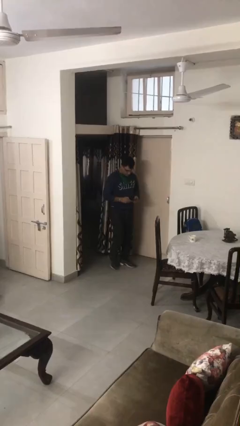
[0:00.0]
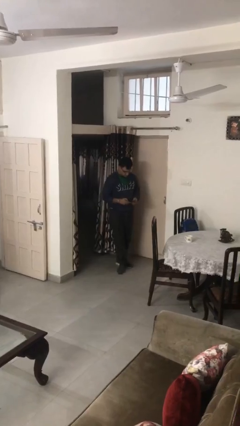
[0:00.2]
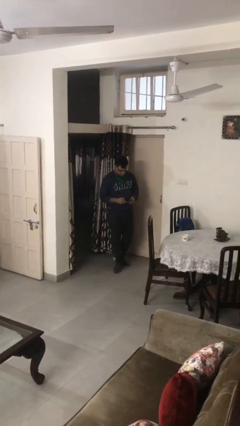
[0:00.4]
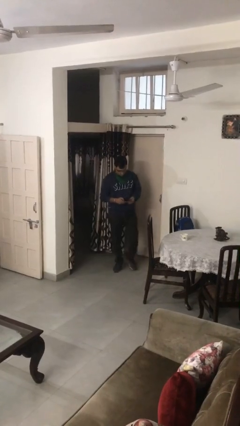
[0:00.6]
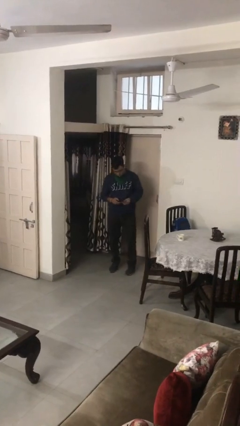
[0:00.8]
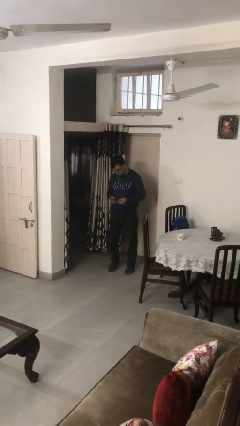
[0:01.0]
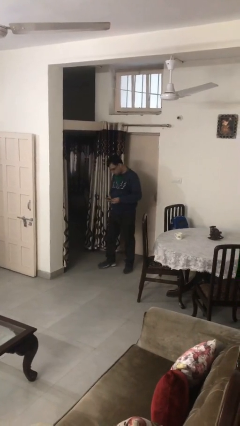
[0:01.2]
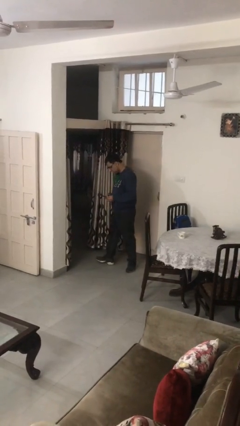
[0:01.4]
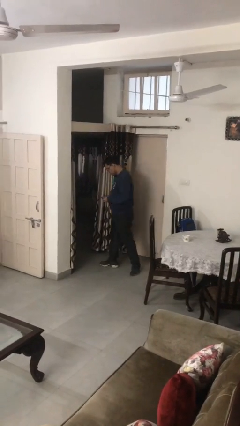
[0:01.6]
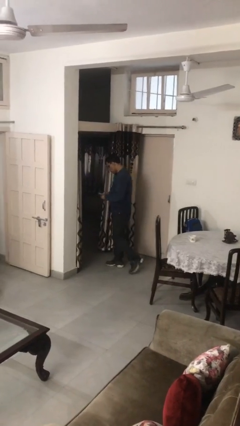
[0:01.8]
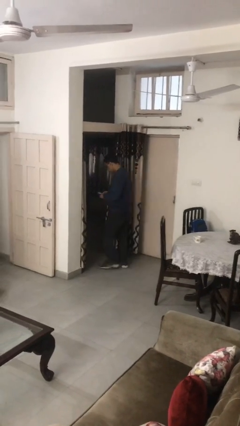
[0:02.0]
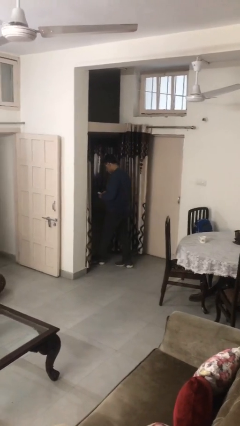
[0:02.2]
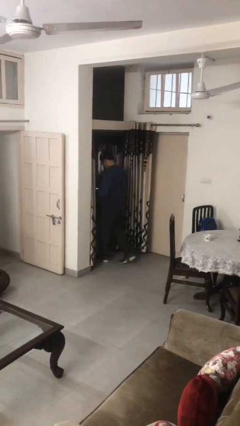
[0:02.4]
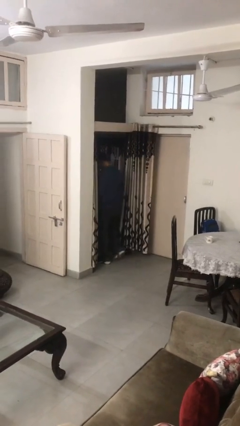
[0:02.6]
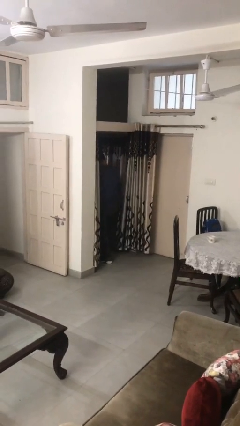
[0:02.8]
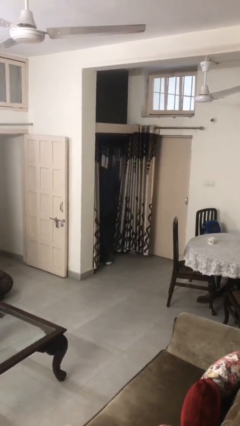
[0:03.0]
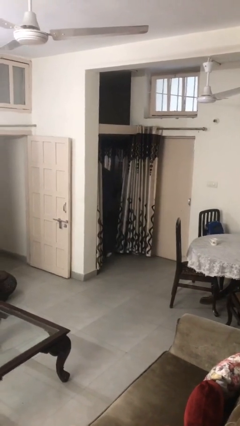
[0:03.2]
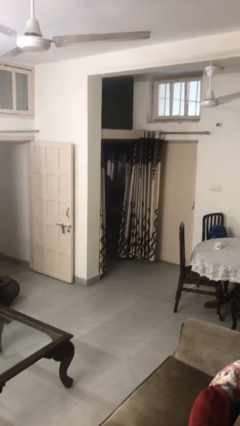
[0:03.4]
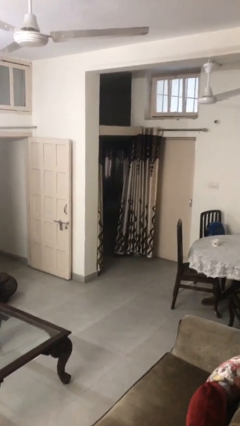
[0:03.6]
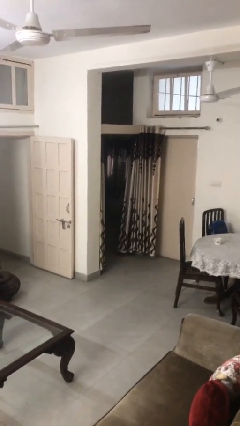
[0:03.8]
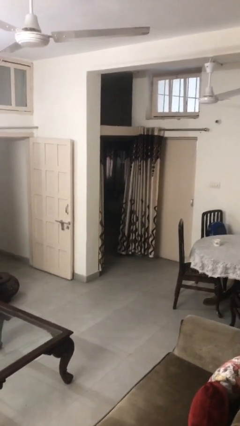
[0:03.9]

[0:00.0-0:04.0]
person exits scene through structure

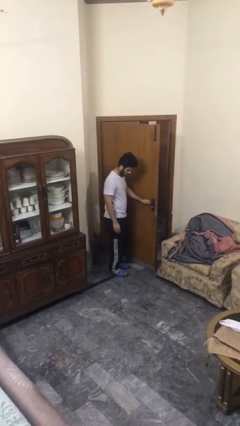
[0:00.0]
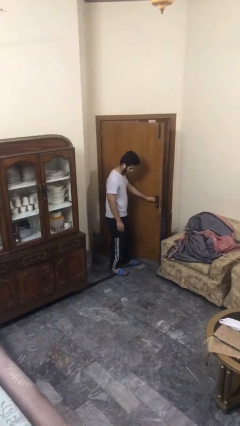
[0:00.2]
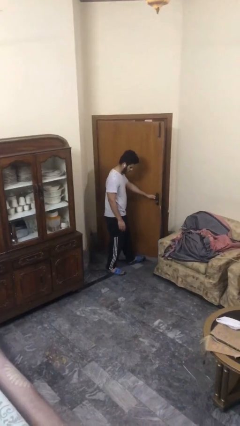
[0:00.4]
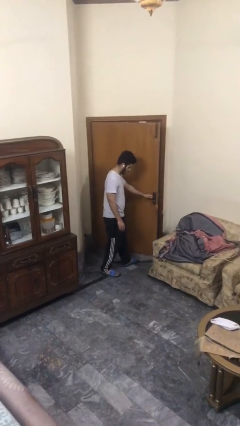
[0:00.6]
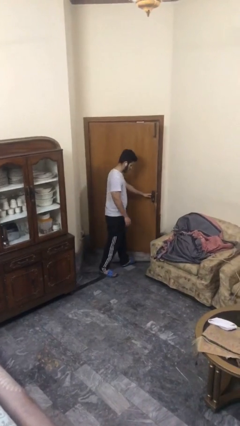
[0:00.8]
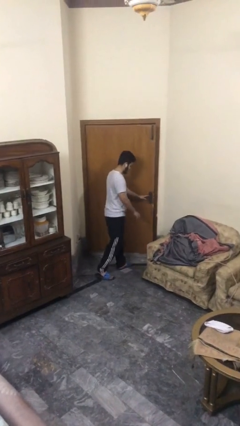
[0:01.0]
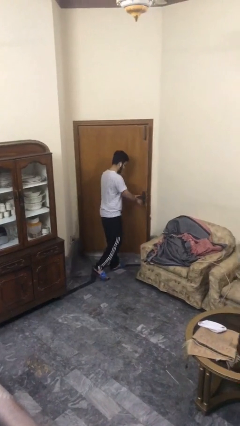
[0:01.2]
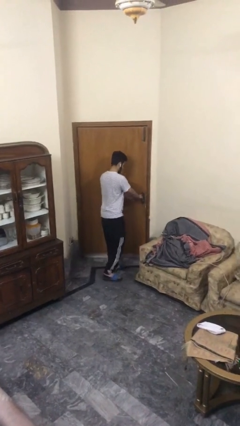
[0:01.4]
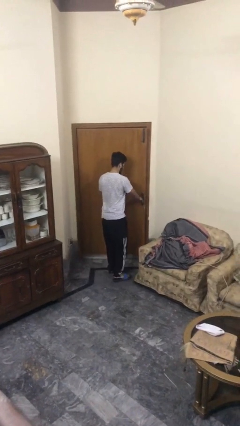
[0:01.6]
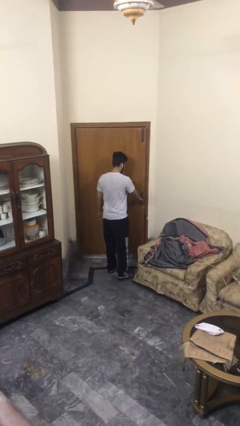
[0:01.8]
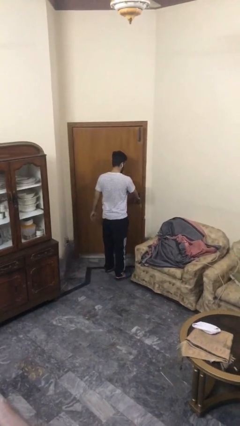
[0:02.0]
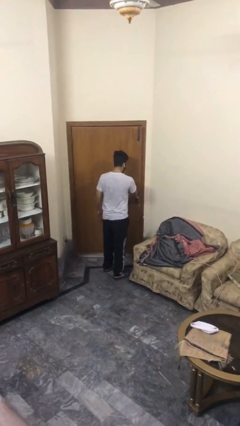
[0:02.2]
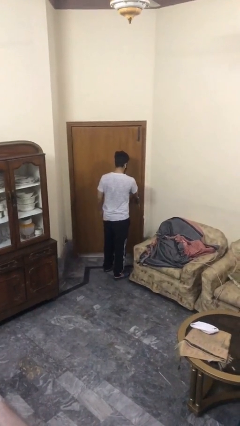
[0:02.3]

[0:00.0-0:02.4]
person closes facility door

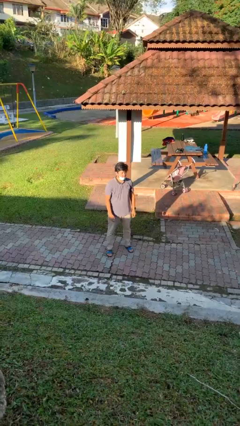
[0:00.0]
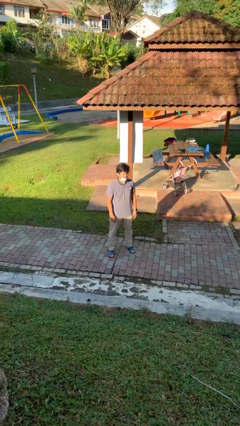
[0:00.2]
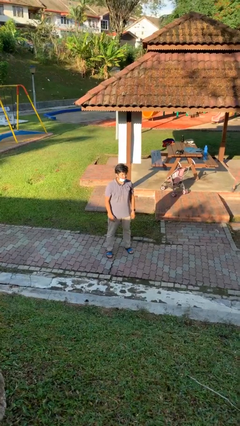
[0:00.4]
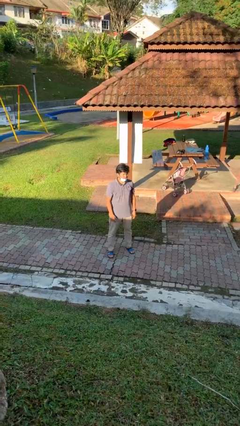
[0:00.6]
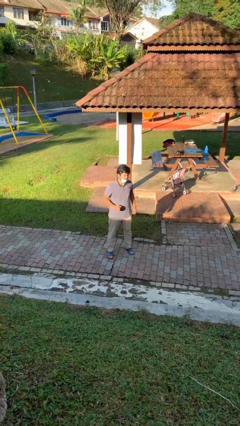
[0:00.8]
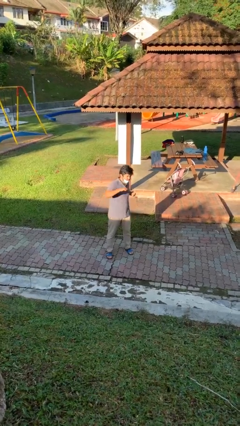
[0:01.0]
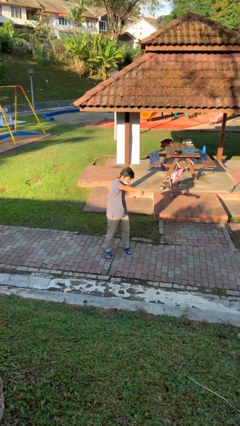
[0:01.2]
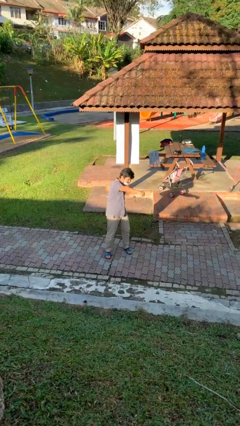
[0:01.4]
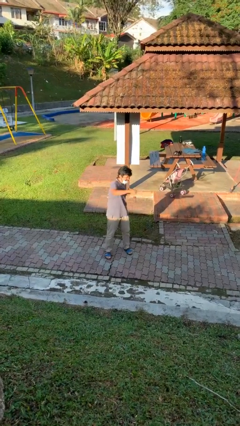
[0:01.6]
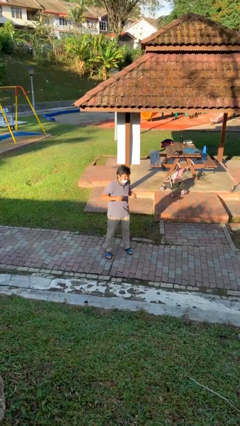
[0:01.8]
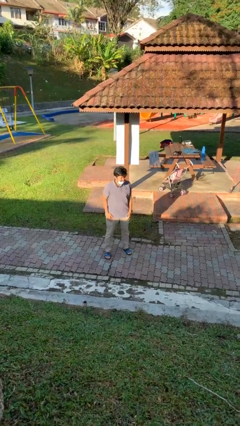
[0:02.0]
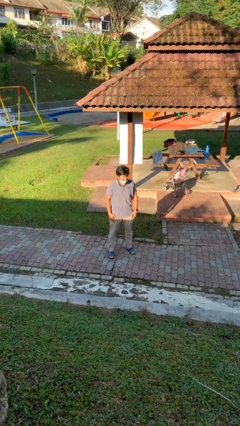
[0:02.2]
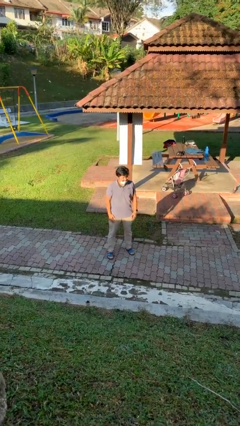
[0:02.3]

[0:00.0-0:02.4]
person punches

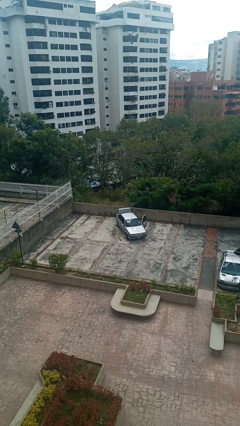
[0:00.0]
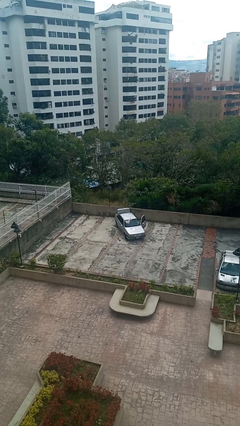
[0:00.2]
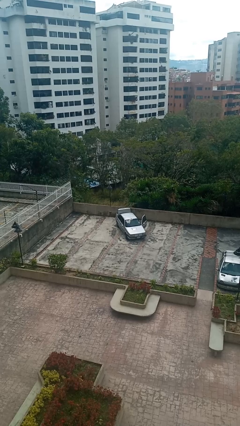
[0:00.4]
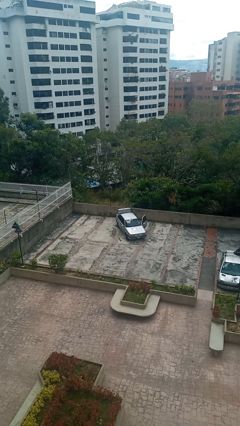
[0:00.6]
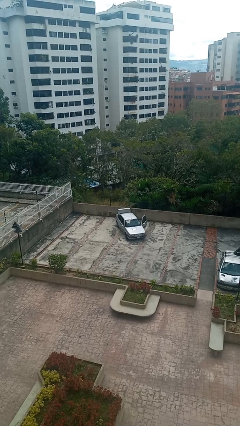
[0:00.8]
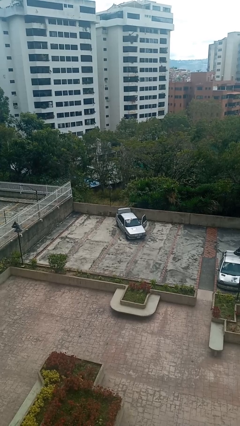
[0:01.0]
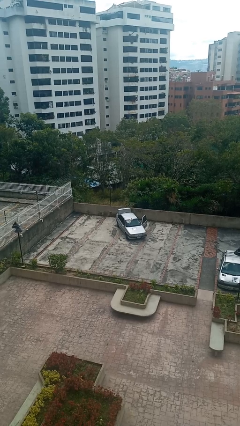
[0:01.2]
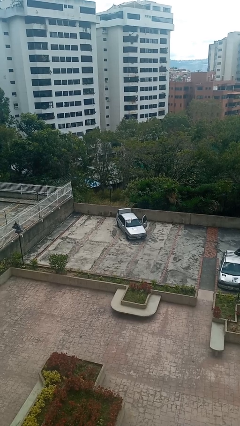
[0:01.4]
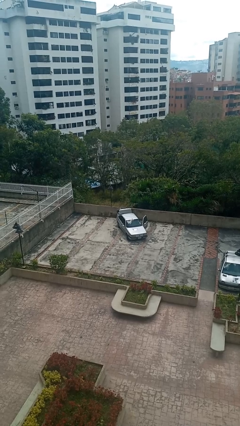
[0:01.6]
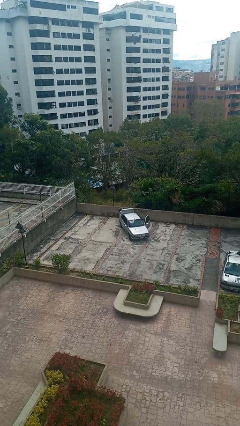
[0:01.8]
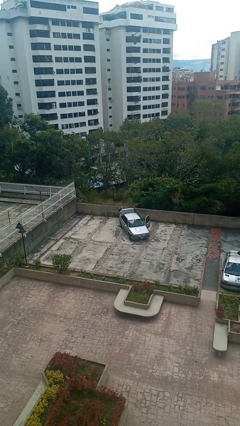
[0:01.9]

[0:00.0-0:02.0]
person unloads car

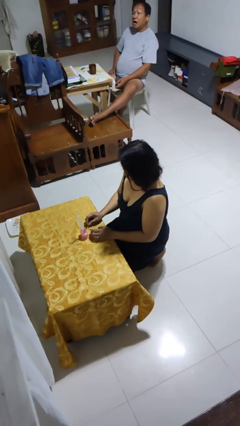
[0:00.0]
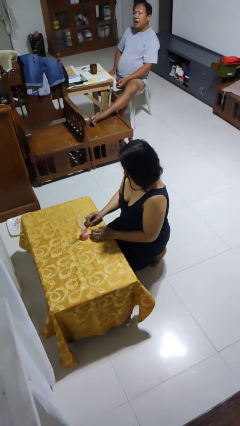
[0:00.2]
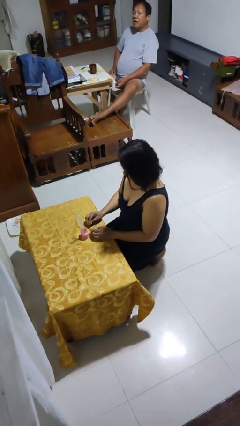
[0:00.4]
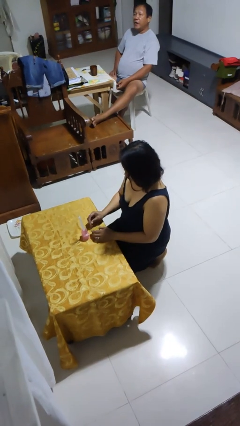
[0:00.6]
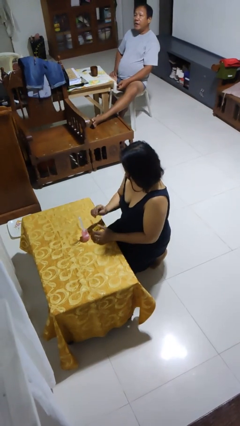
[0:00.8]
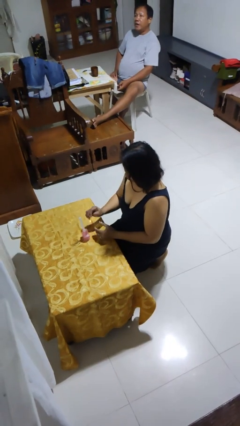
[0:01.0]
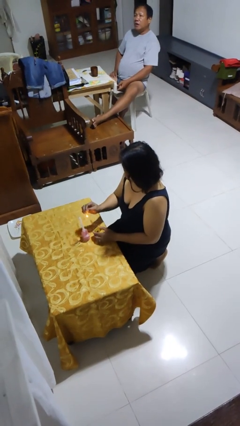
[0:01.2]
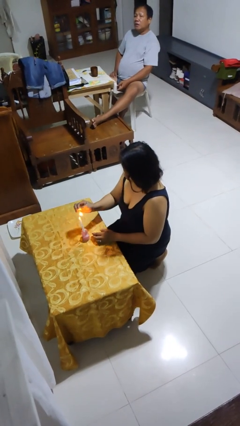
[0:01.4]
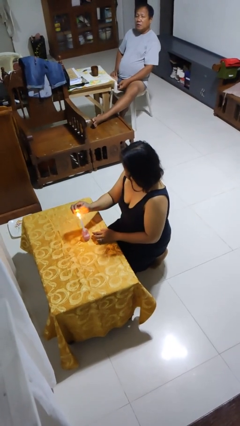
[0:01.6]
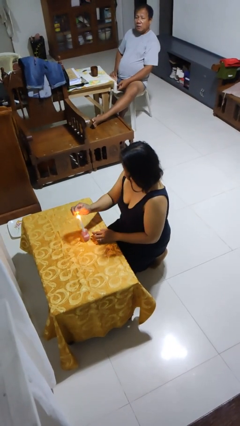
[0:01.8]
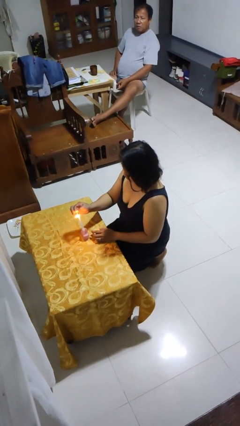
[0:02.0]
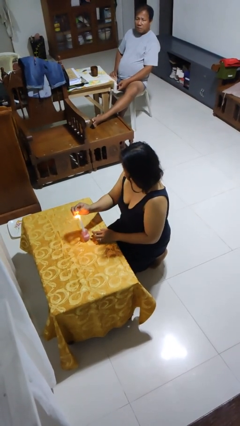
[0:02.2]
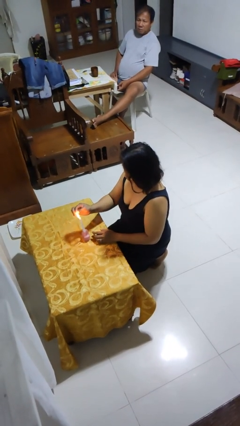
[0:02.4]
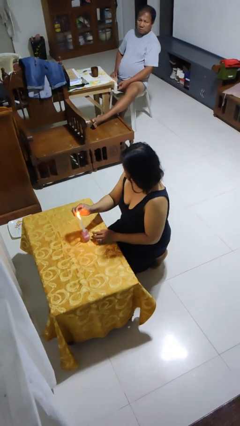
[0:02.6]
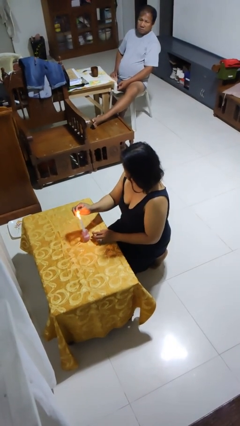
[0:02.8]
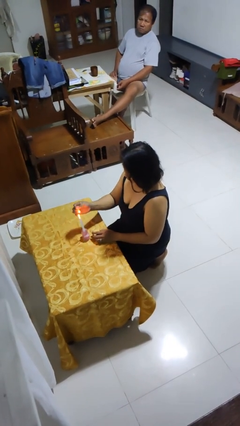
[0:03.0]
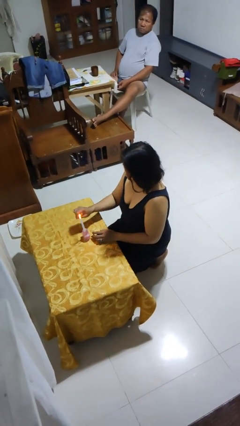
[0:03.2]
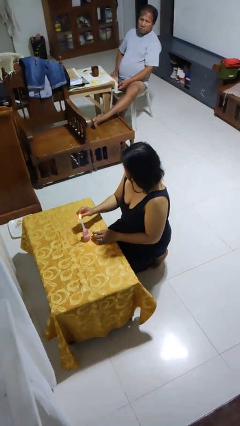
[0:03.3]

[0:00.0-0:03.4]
person lights candle

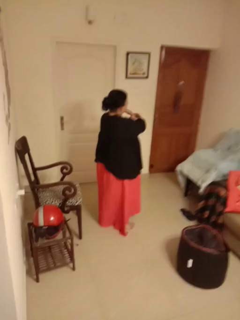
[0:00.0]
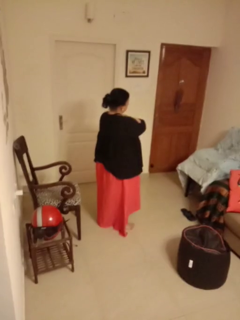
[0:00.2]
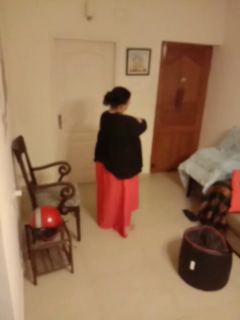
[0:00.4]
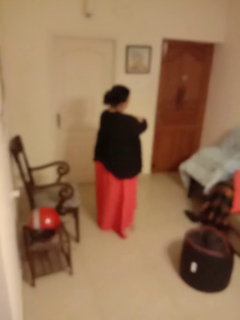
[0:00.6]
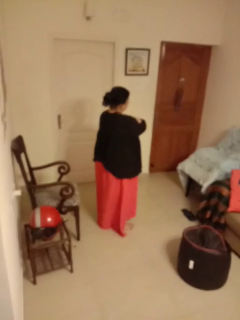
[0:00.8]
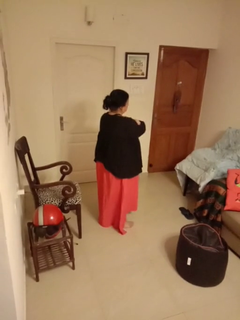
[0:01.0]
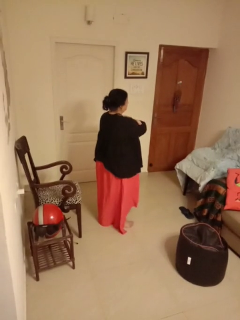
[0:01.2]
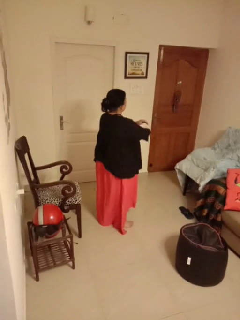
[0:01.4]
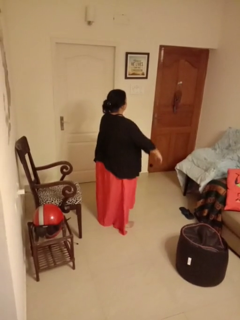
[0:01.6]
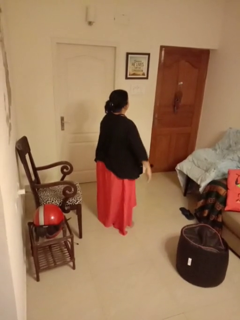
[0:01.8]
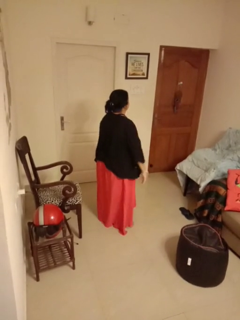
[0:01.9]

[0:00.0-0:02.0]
person gestures arms x

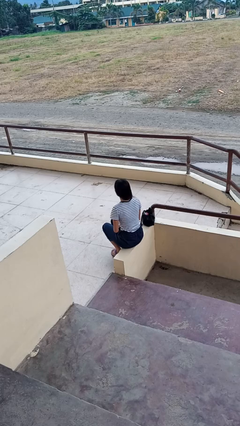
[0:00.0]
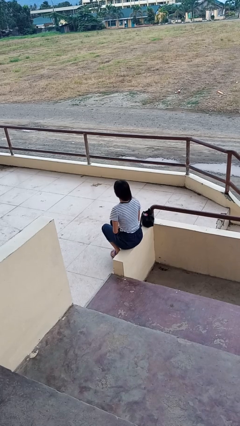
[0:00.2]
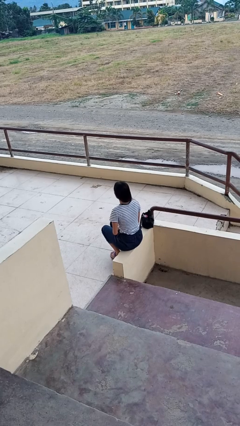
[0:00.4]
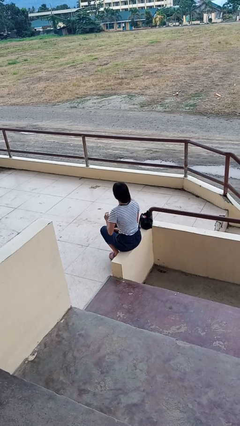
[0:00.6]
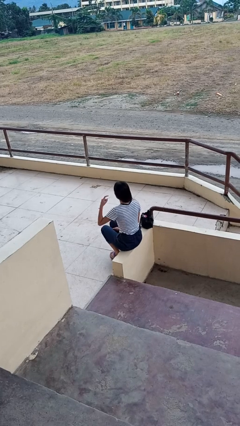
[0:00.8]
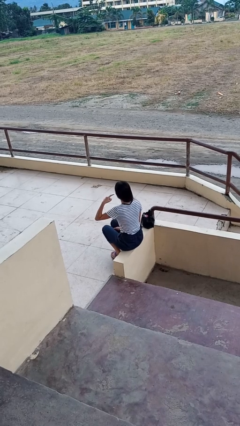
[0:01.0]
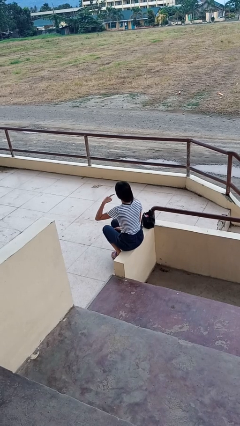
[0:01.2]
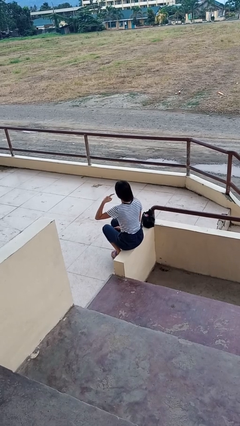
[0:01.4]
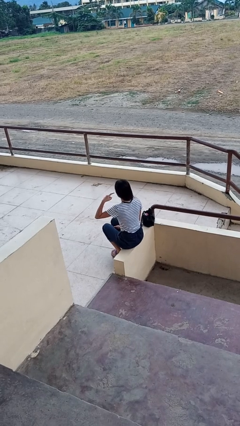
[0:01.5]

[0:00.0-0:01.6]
person gestures listen closely
